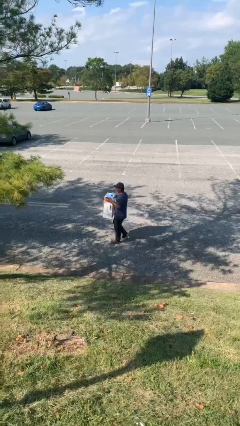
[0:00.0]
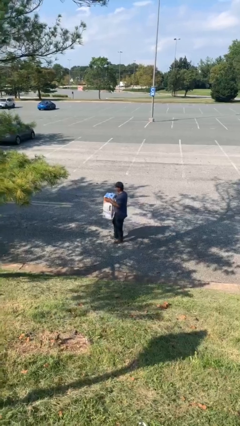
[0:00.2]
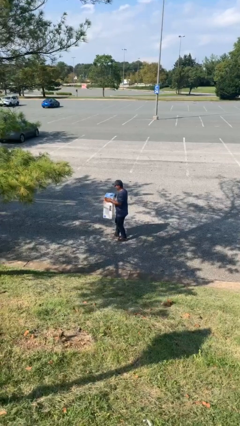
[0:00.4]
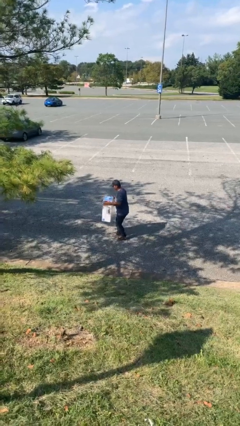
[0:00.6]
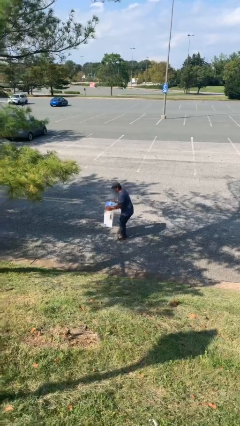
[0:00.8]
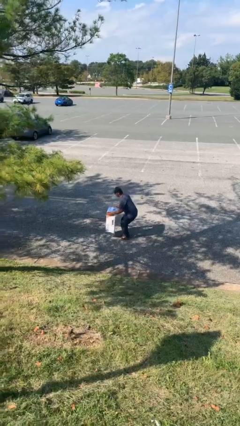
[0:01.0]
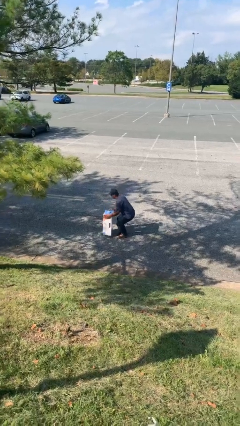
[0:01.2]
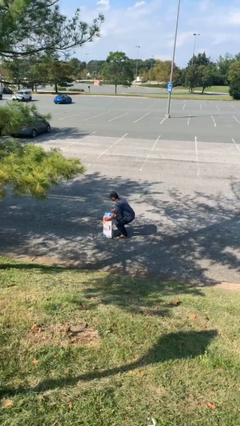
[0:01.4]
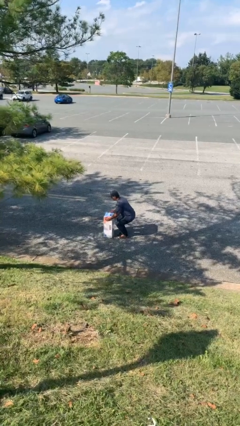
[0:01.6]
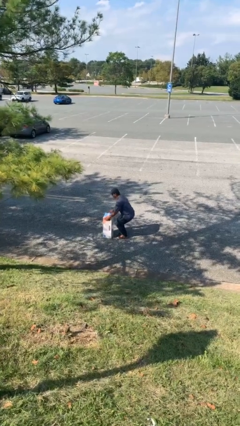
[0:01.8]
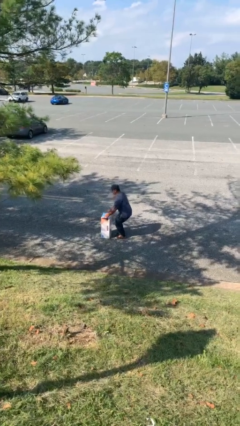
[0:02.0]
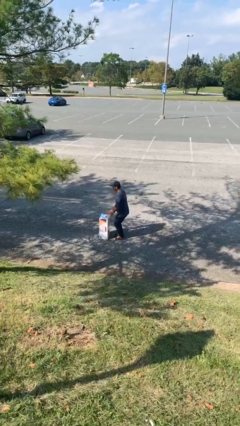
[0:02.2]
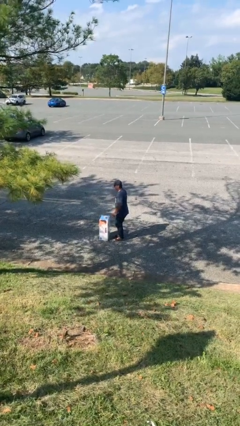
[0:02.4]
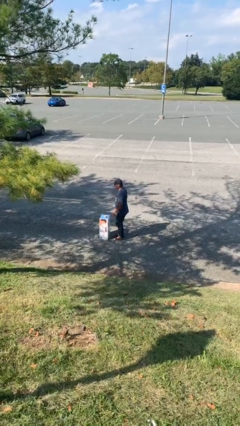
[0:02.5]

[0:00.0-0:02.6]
person puts down object on floor

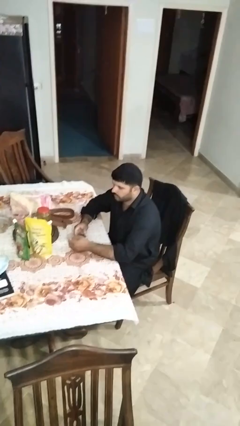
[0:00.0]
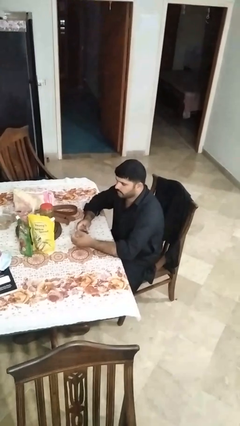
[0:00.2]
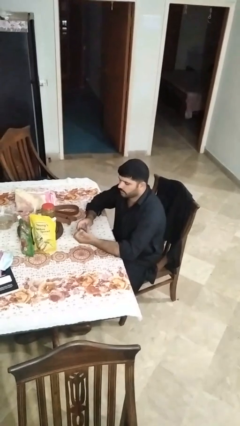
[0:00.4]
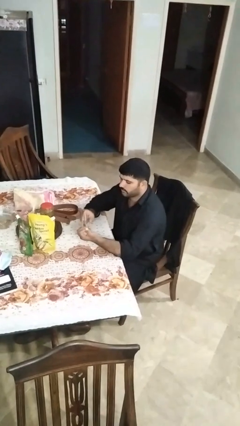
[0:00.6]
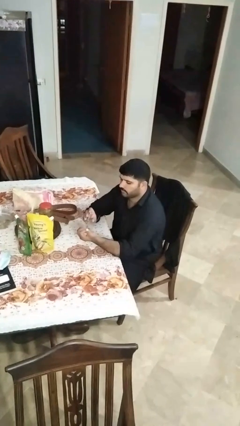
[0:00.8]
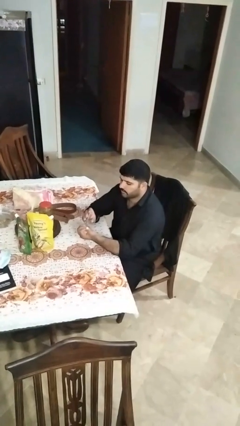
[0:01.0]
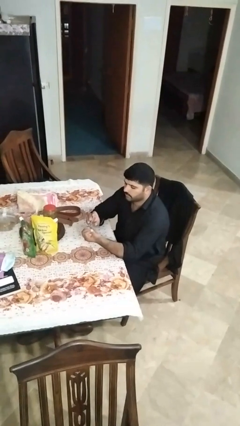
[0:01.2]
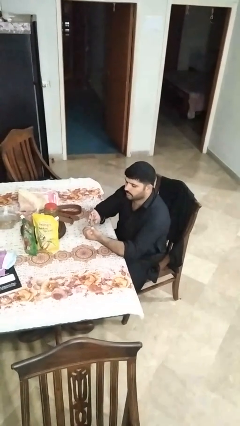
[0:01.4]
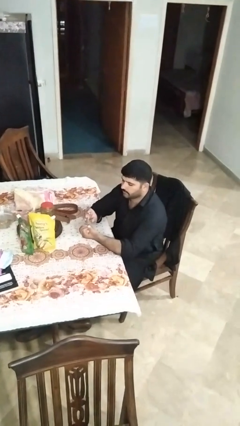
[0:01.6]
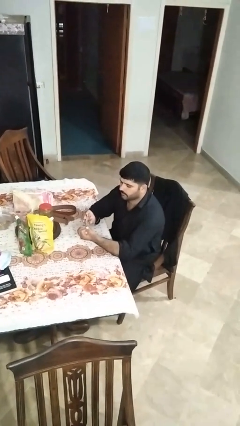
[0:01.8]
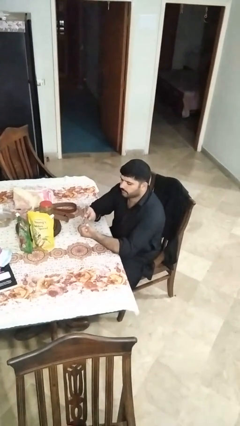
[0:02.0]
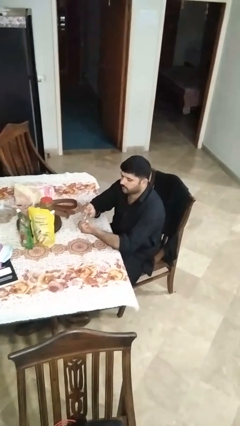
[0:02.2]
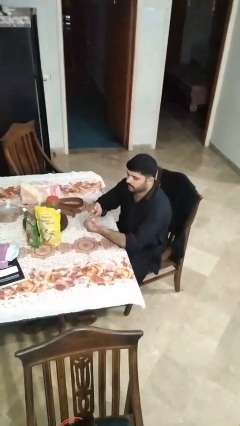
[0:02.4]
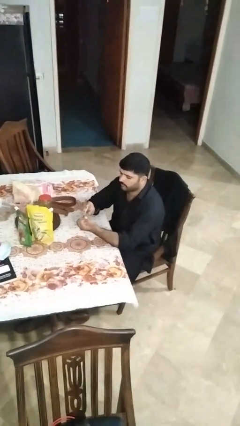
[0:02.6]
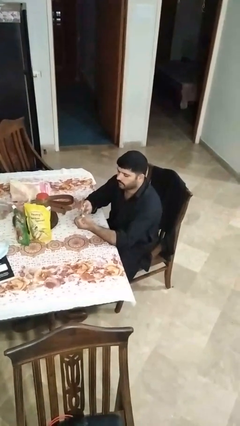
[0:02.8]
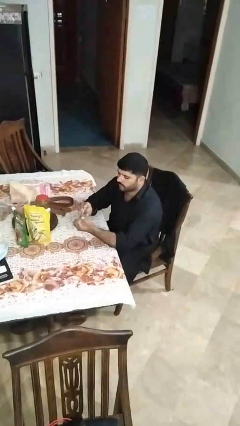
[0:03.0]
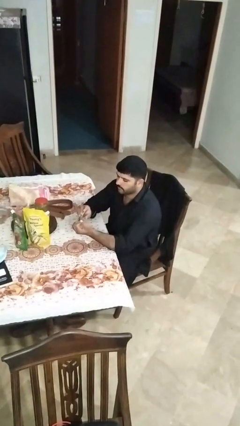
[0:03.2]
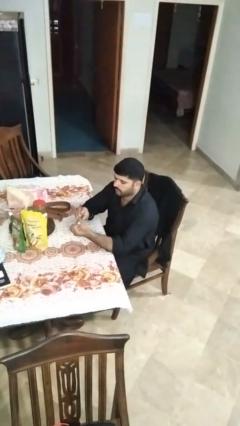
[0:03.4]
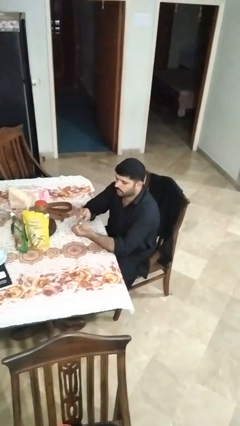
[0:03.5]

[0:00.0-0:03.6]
person clips fingernails

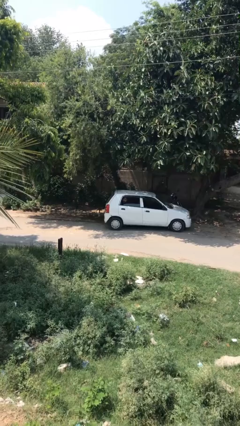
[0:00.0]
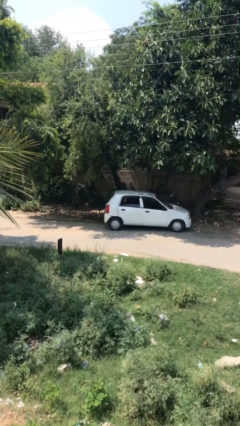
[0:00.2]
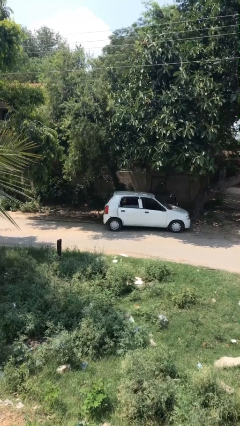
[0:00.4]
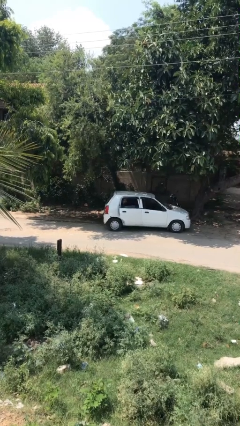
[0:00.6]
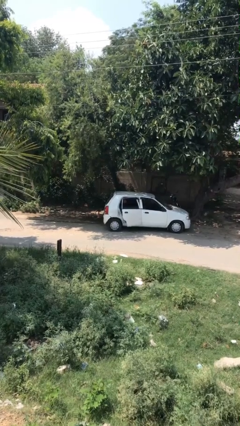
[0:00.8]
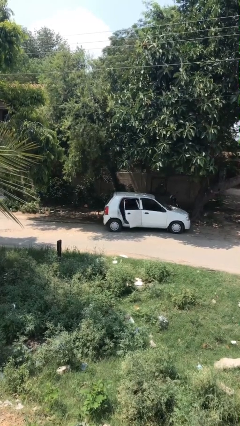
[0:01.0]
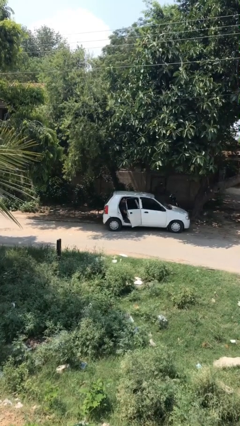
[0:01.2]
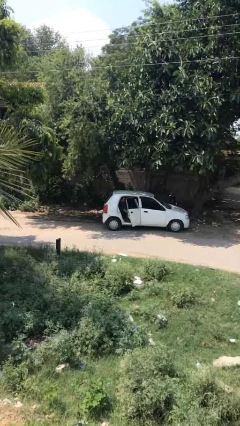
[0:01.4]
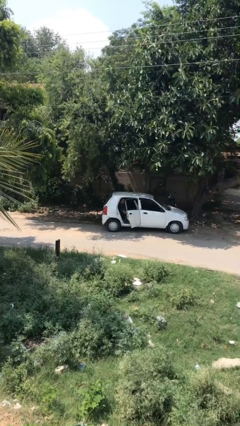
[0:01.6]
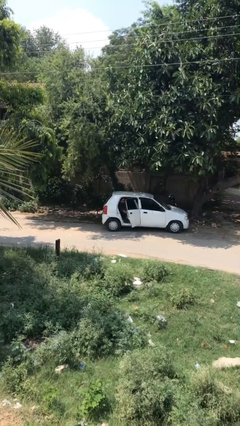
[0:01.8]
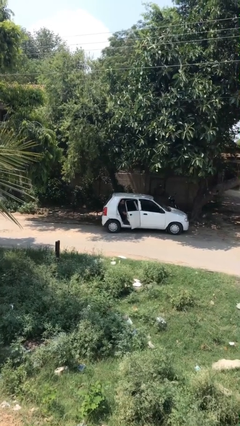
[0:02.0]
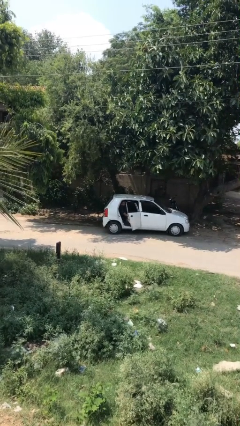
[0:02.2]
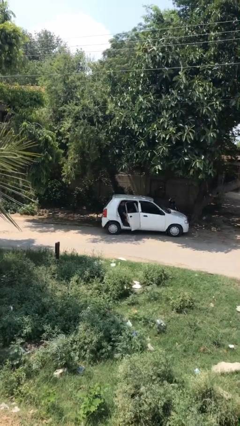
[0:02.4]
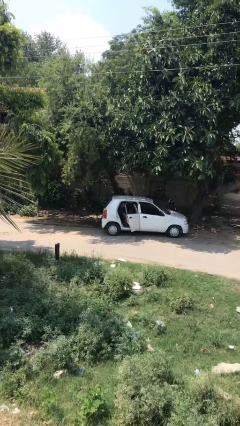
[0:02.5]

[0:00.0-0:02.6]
person opens car door

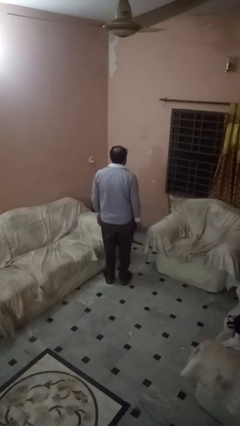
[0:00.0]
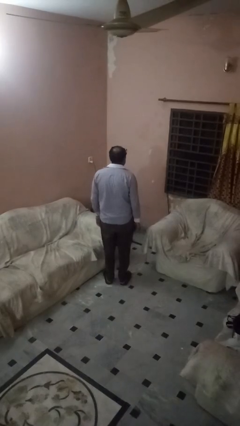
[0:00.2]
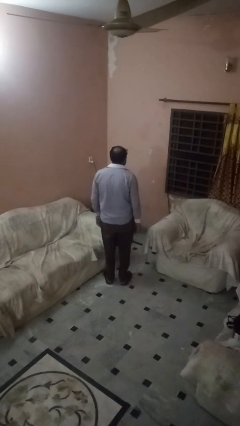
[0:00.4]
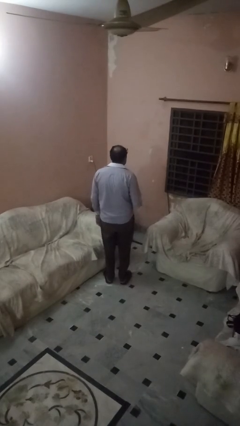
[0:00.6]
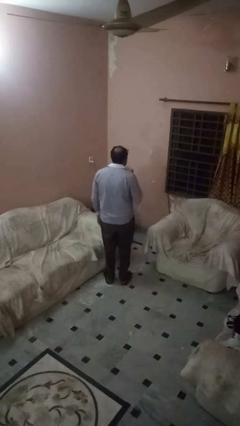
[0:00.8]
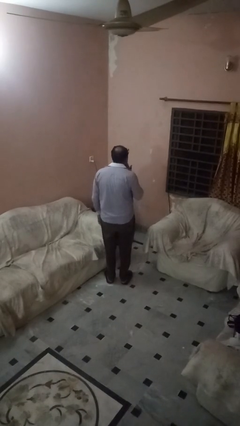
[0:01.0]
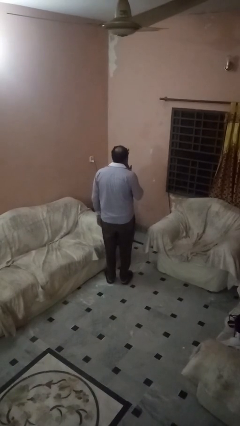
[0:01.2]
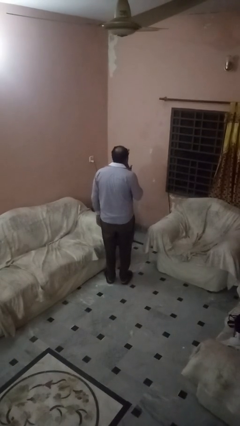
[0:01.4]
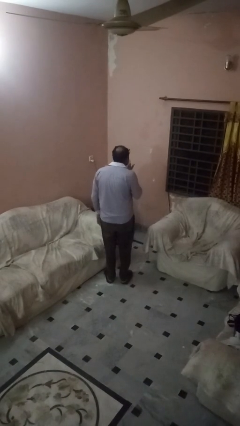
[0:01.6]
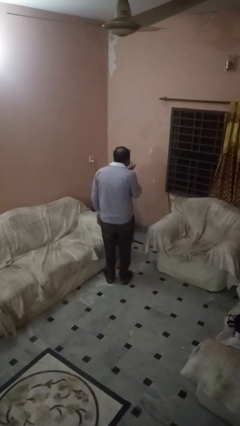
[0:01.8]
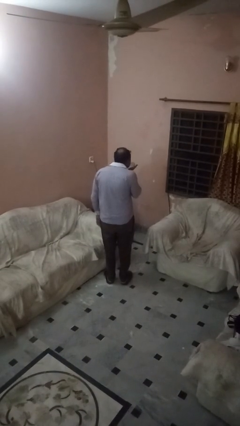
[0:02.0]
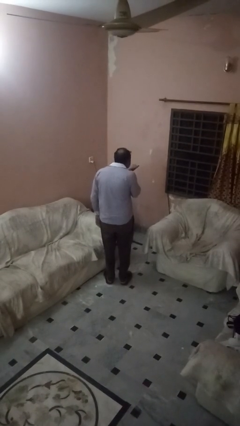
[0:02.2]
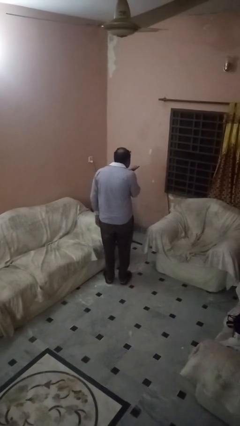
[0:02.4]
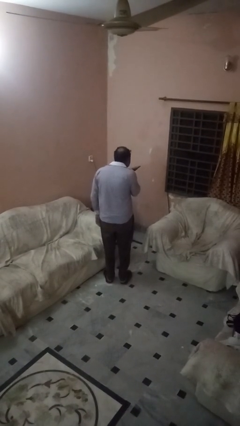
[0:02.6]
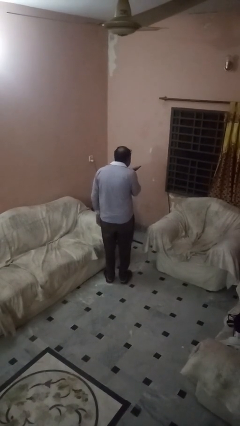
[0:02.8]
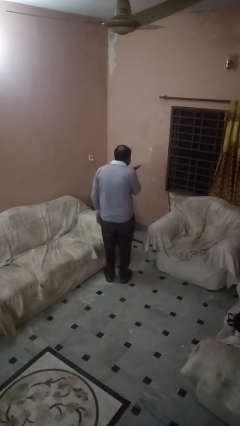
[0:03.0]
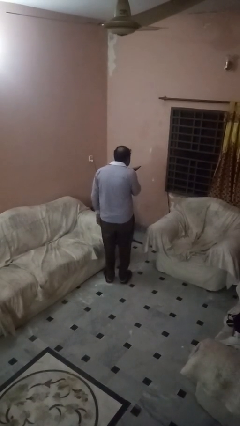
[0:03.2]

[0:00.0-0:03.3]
person gestures blow kiss

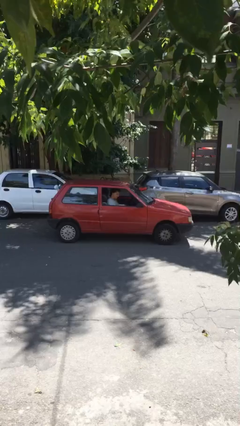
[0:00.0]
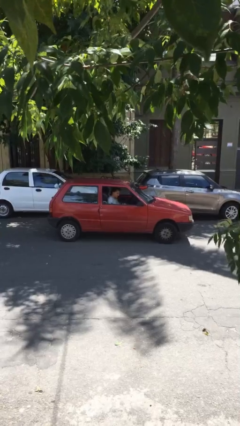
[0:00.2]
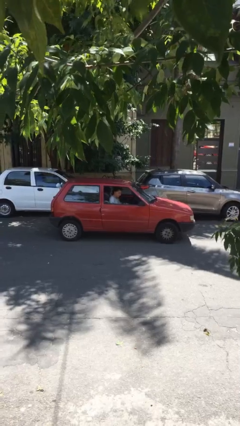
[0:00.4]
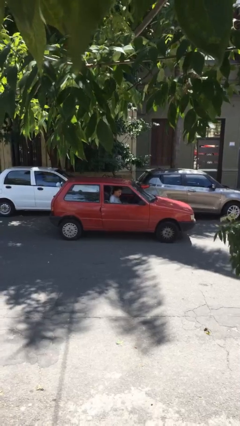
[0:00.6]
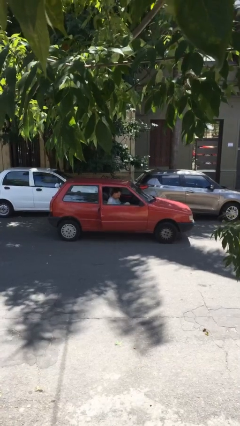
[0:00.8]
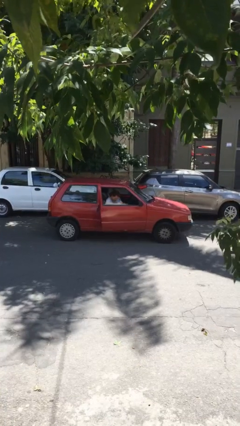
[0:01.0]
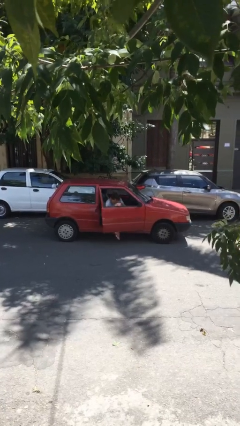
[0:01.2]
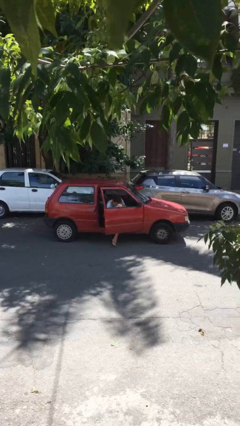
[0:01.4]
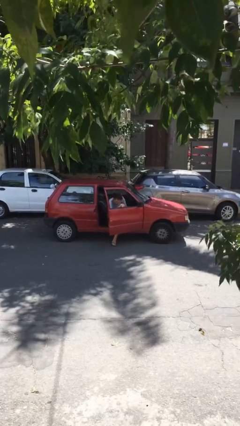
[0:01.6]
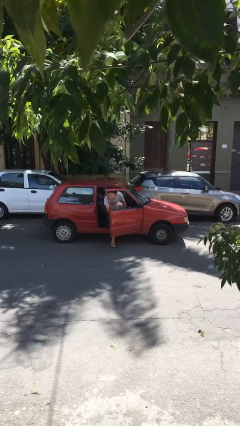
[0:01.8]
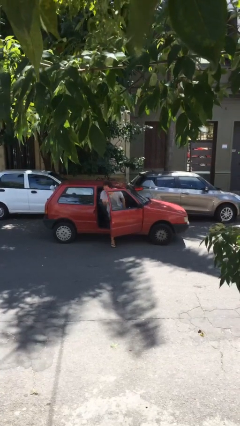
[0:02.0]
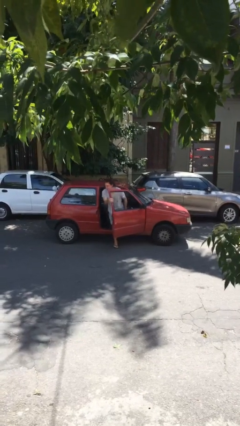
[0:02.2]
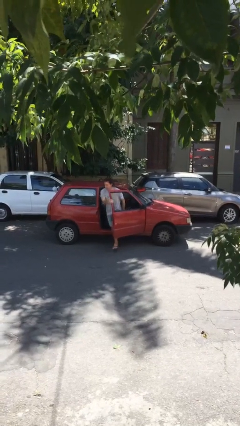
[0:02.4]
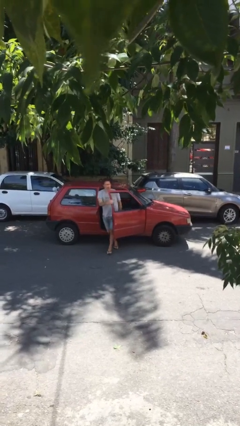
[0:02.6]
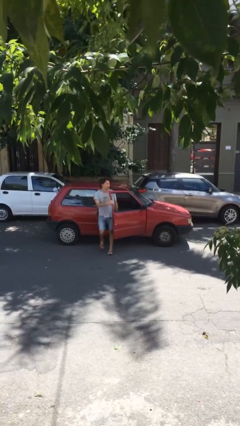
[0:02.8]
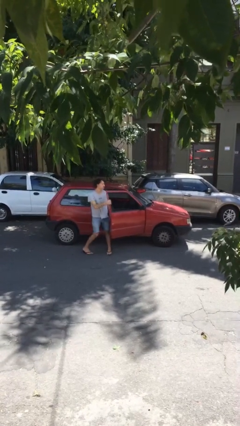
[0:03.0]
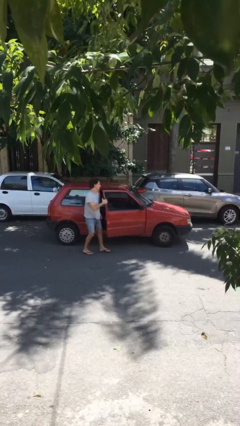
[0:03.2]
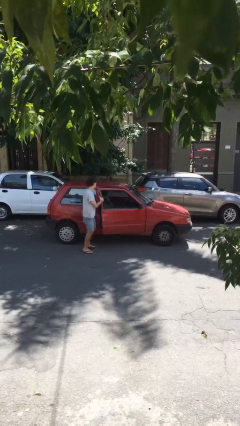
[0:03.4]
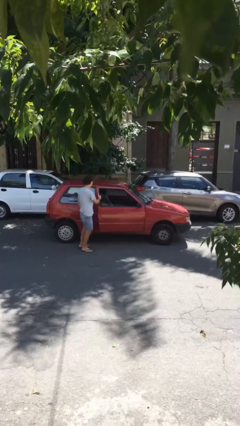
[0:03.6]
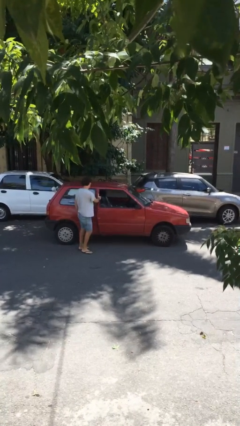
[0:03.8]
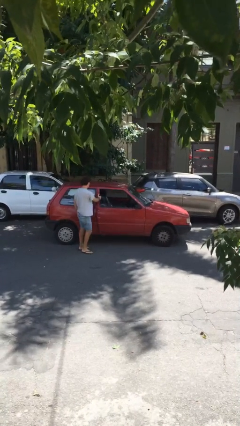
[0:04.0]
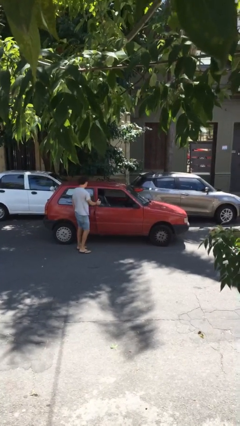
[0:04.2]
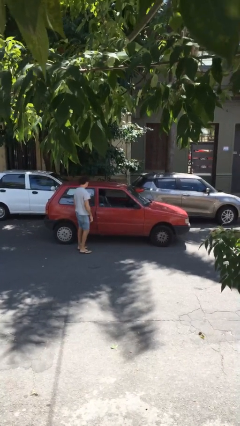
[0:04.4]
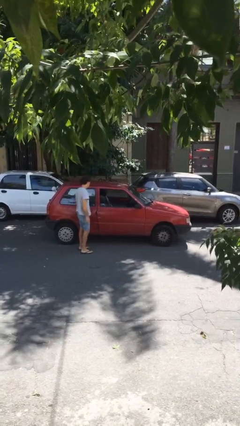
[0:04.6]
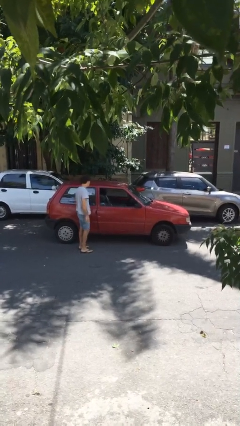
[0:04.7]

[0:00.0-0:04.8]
car drops off person

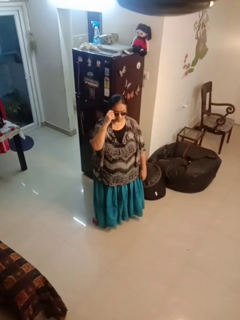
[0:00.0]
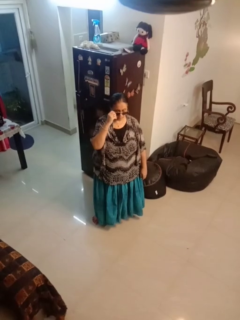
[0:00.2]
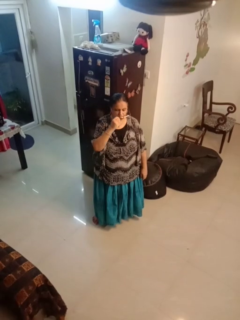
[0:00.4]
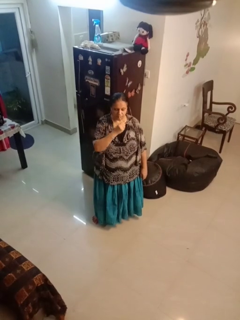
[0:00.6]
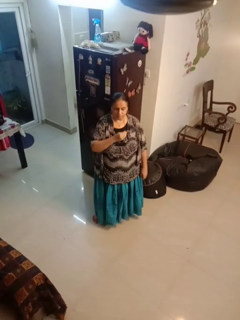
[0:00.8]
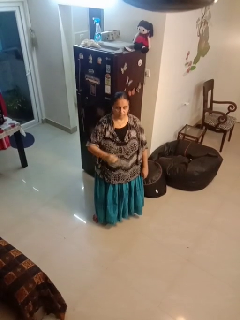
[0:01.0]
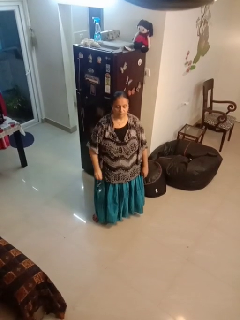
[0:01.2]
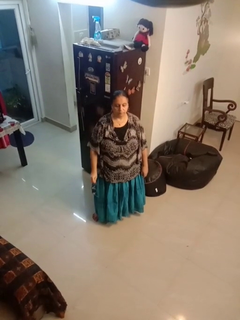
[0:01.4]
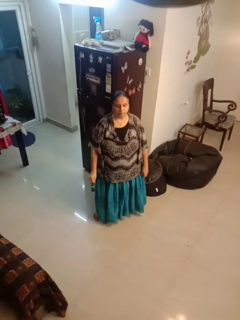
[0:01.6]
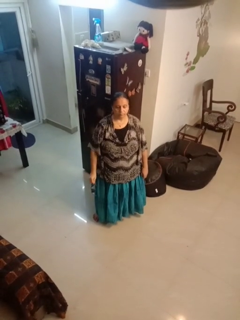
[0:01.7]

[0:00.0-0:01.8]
person takes off sunglasses
